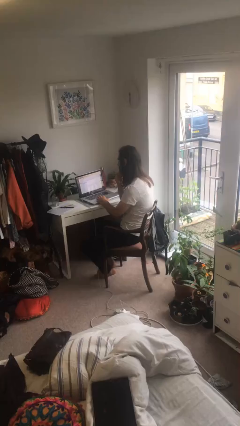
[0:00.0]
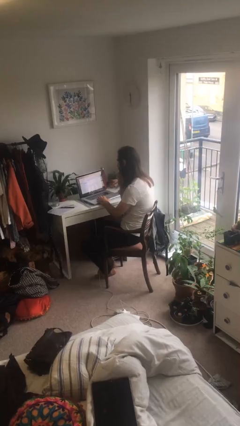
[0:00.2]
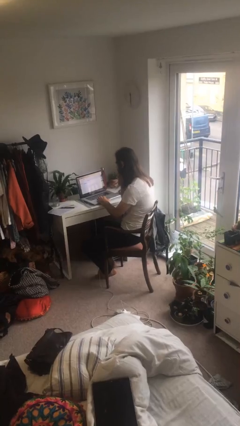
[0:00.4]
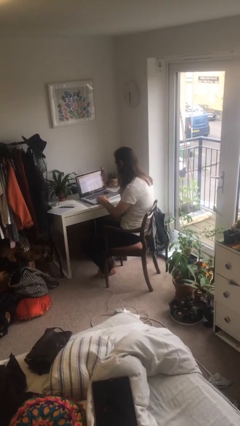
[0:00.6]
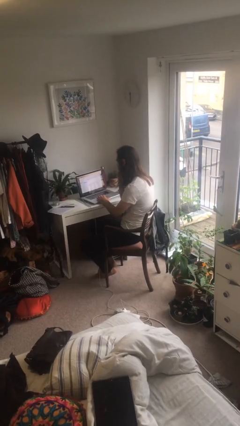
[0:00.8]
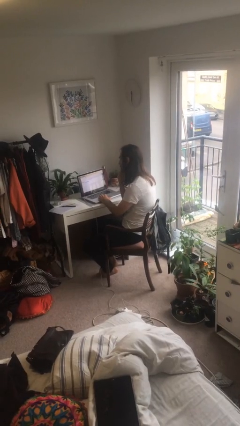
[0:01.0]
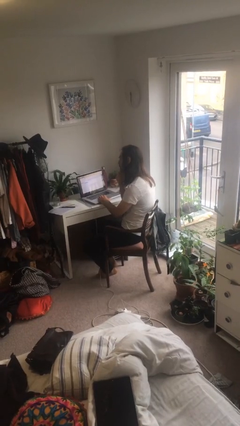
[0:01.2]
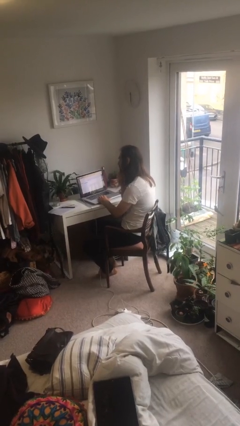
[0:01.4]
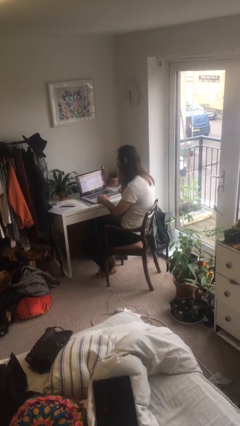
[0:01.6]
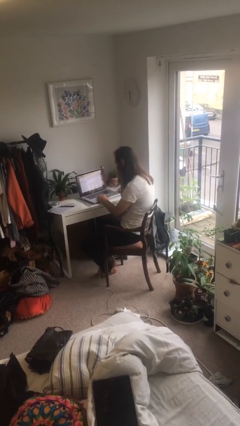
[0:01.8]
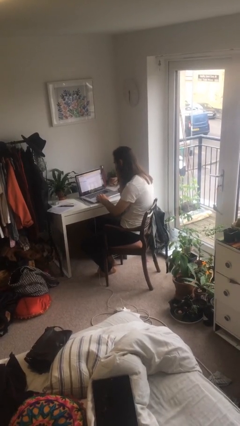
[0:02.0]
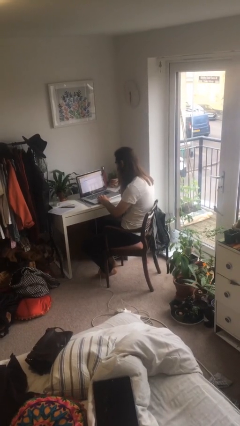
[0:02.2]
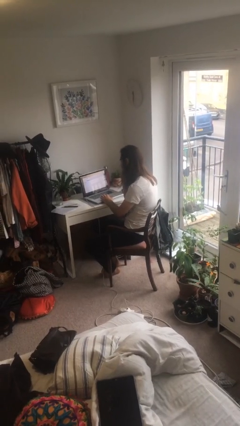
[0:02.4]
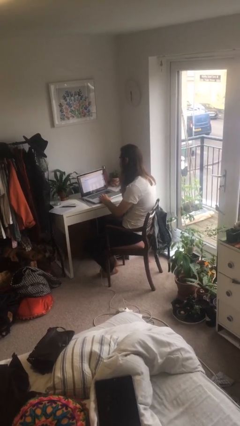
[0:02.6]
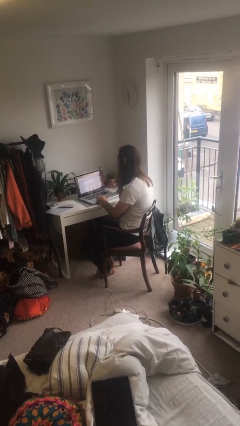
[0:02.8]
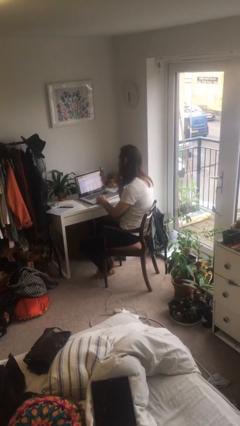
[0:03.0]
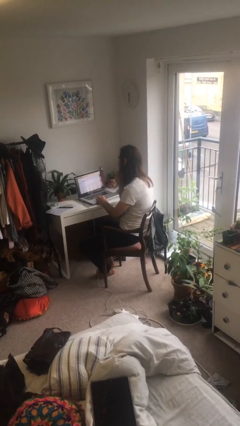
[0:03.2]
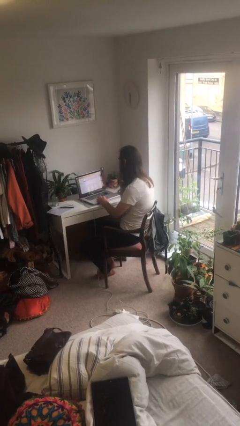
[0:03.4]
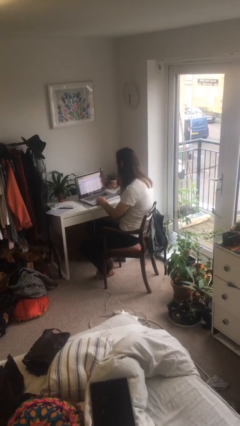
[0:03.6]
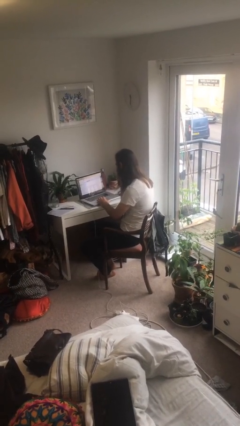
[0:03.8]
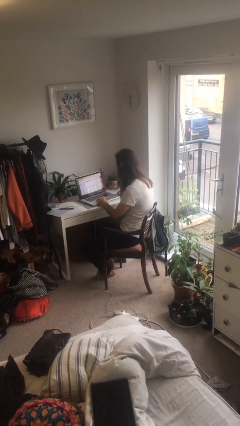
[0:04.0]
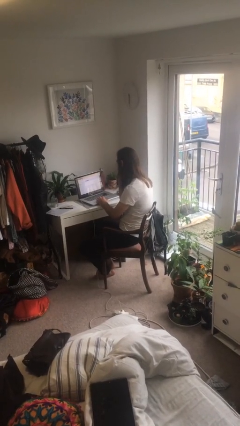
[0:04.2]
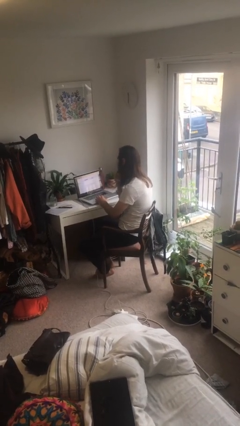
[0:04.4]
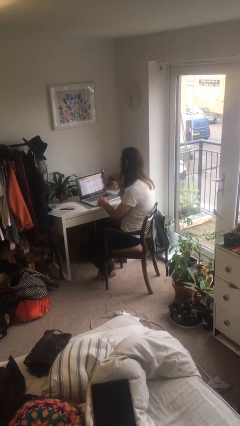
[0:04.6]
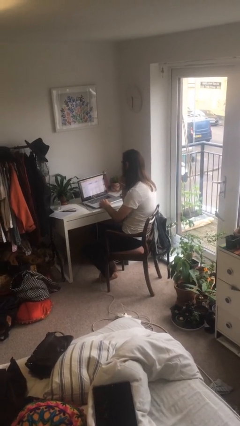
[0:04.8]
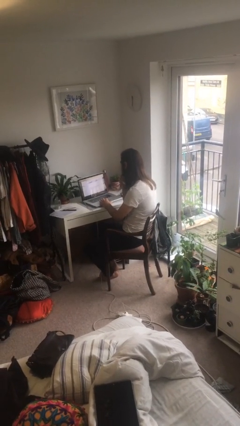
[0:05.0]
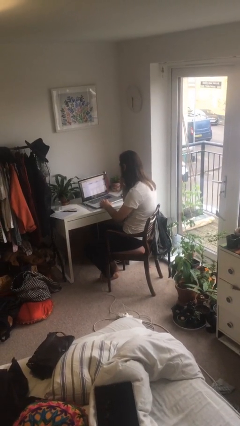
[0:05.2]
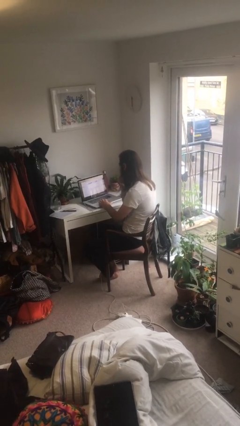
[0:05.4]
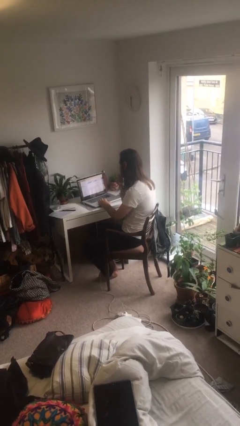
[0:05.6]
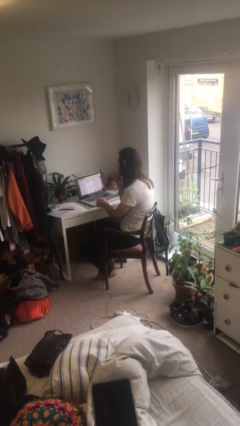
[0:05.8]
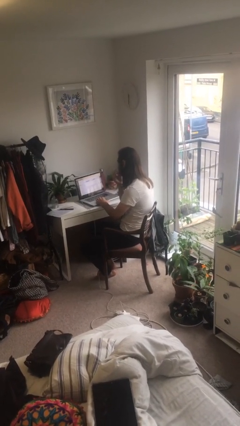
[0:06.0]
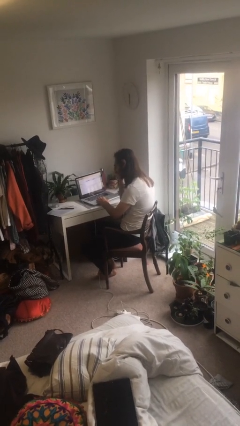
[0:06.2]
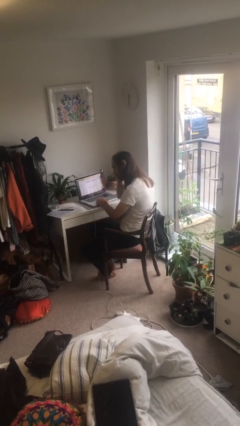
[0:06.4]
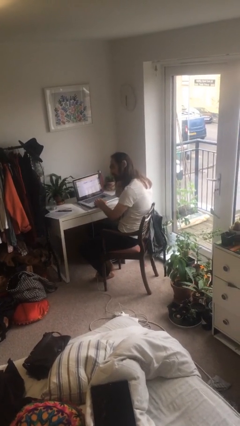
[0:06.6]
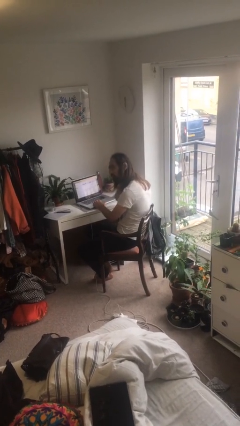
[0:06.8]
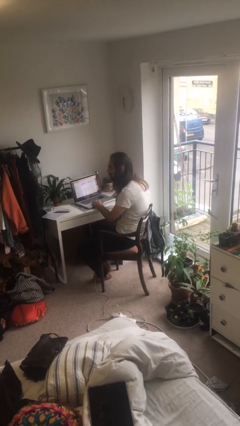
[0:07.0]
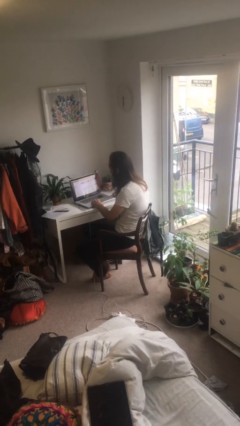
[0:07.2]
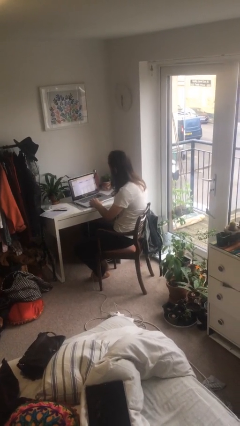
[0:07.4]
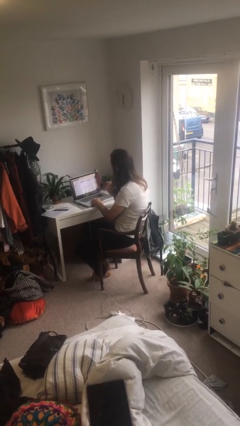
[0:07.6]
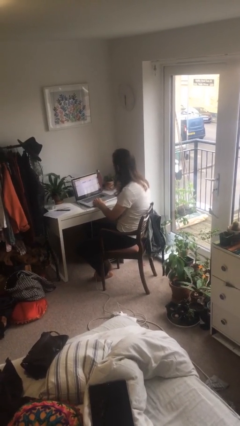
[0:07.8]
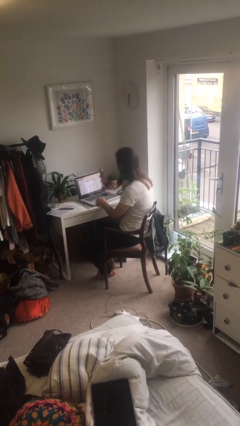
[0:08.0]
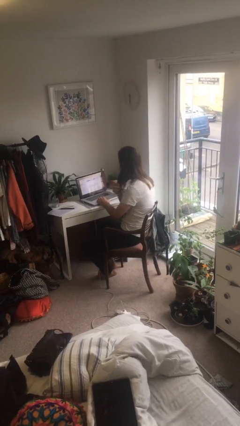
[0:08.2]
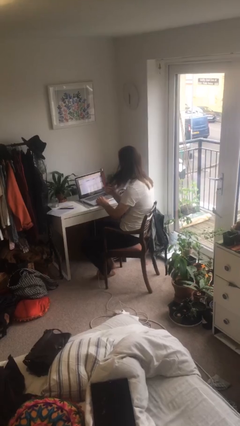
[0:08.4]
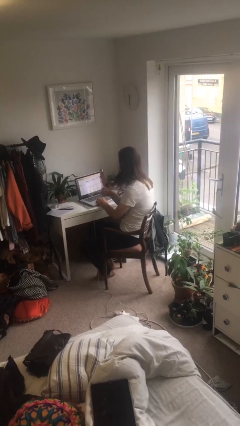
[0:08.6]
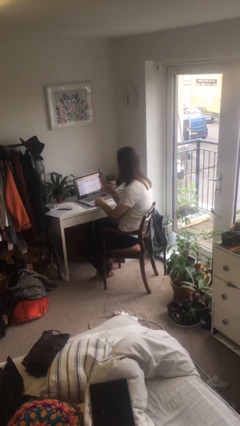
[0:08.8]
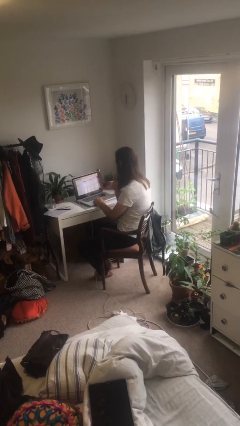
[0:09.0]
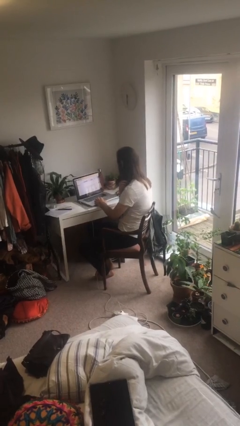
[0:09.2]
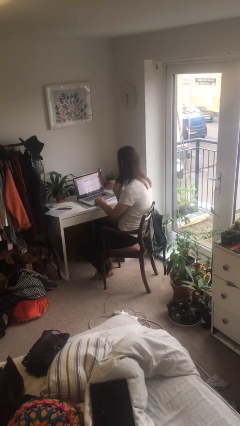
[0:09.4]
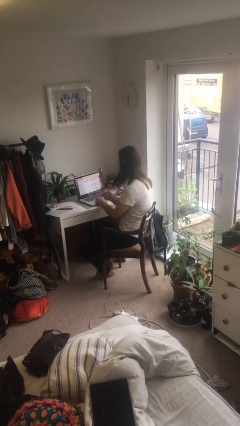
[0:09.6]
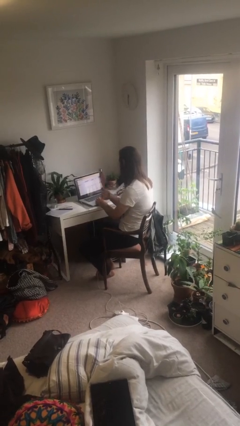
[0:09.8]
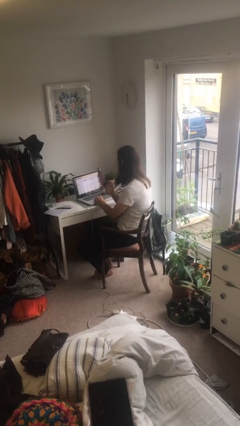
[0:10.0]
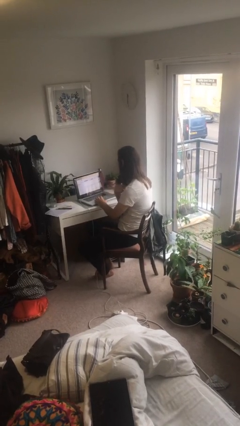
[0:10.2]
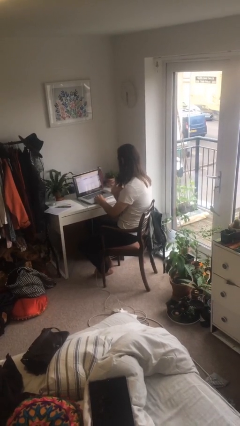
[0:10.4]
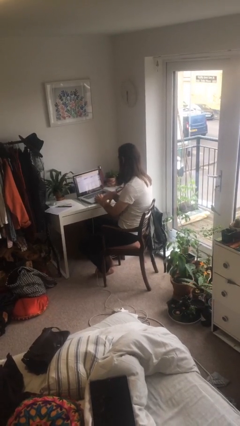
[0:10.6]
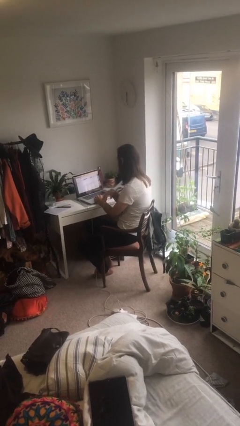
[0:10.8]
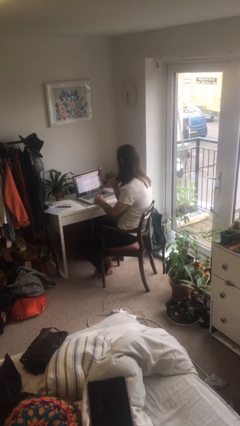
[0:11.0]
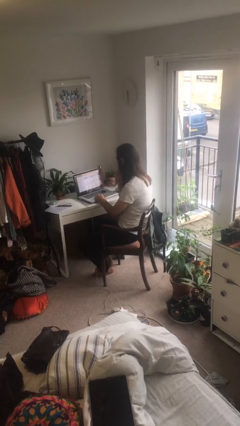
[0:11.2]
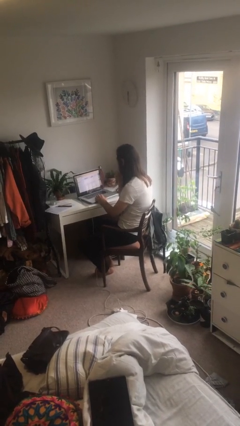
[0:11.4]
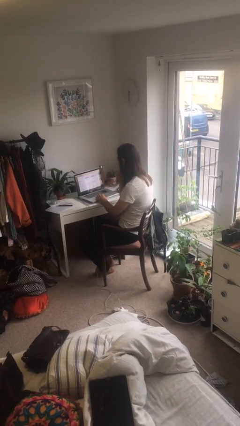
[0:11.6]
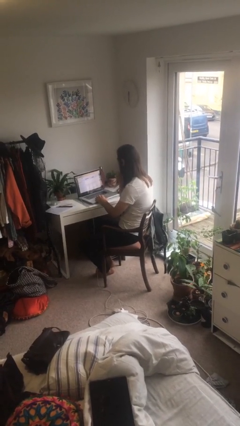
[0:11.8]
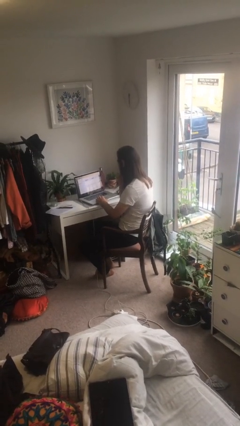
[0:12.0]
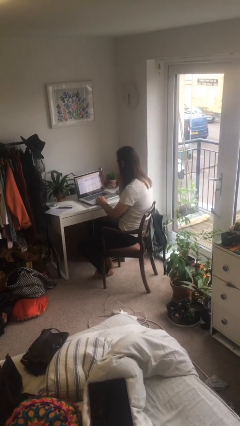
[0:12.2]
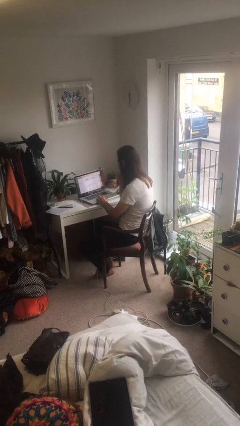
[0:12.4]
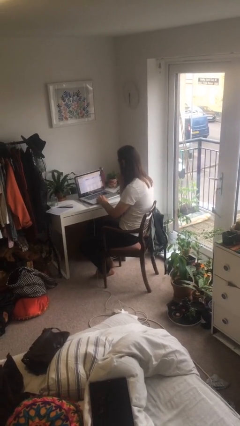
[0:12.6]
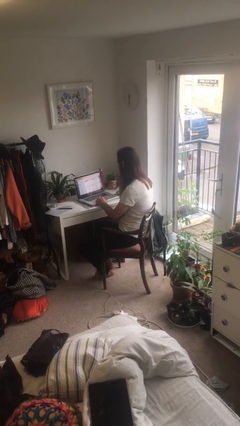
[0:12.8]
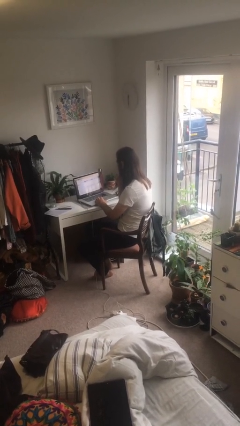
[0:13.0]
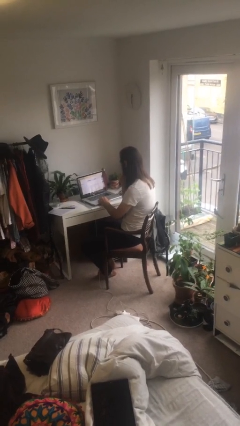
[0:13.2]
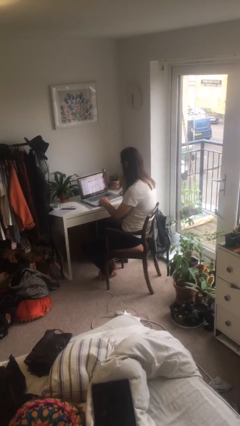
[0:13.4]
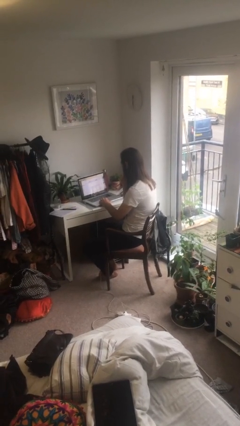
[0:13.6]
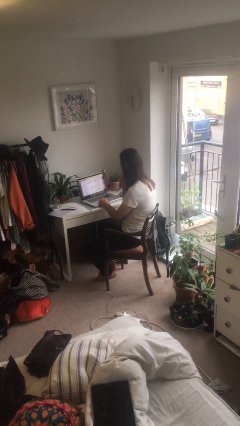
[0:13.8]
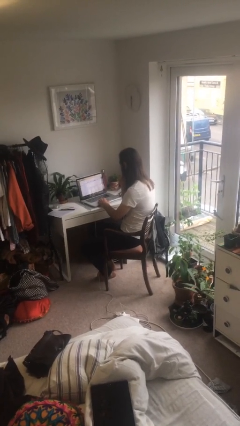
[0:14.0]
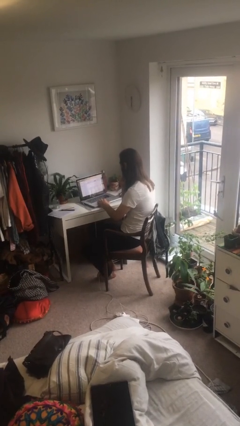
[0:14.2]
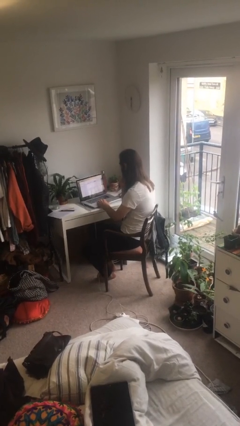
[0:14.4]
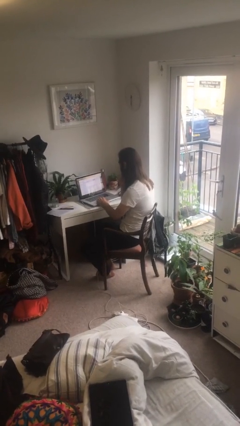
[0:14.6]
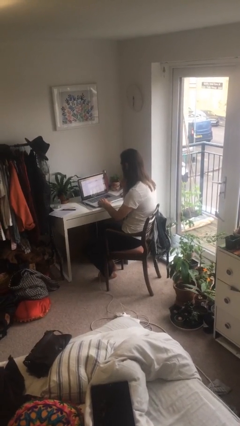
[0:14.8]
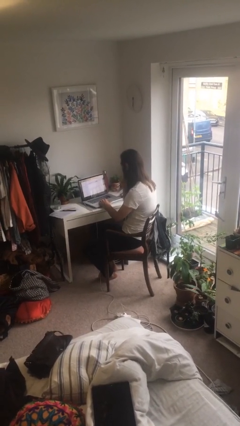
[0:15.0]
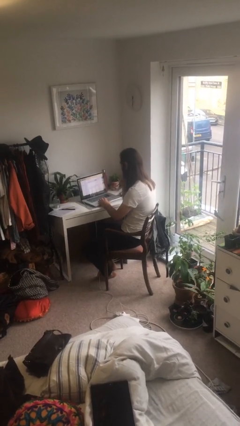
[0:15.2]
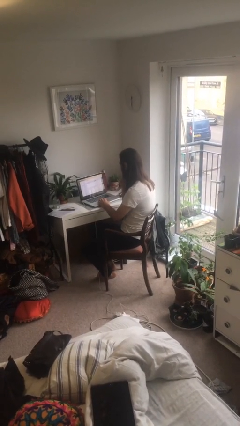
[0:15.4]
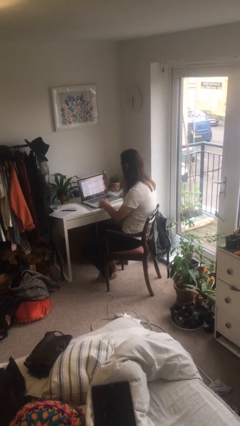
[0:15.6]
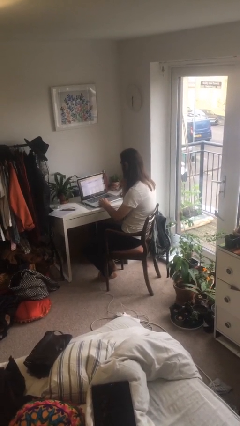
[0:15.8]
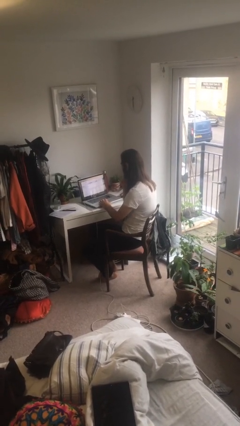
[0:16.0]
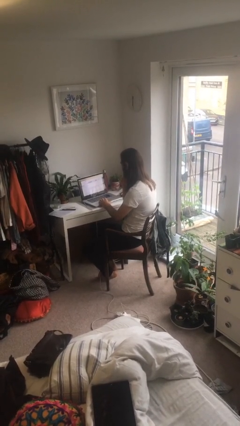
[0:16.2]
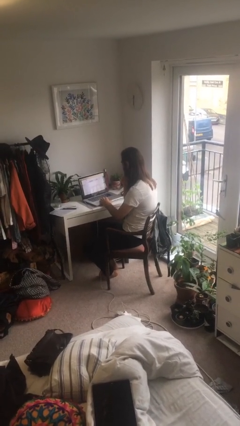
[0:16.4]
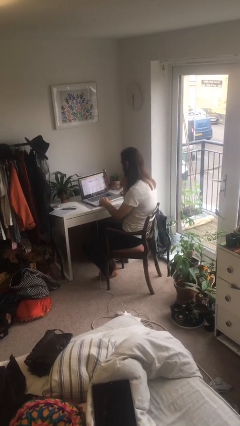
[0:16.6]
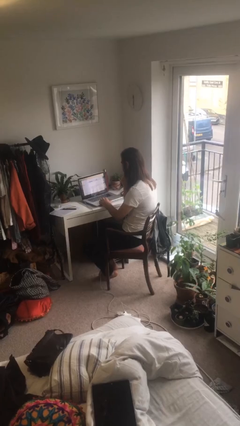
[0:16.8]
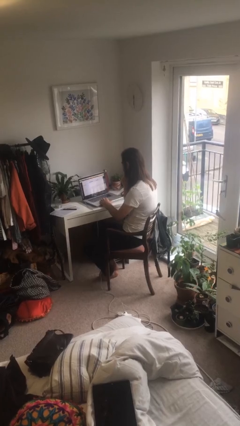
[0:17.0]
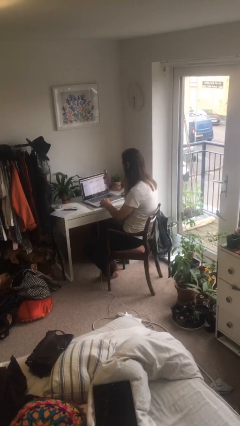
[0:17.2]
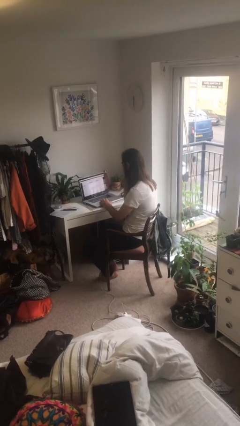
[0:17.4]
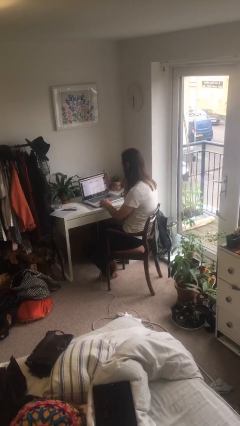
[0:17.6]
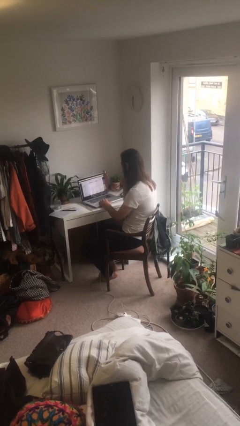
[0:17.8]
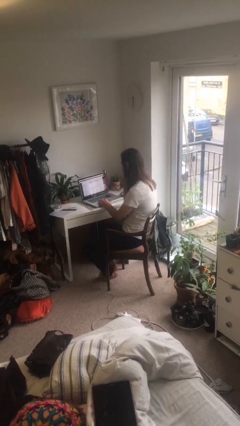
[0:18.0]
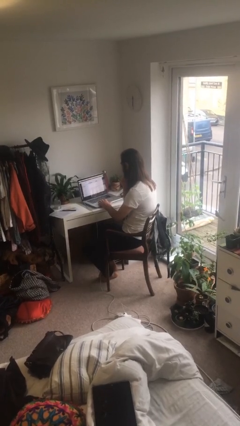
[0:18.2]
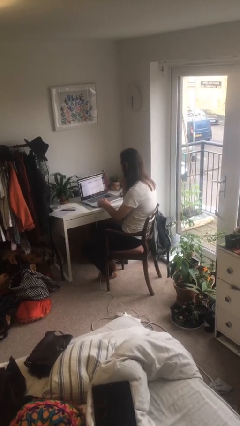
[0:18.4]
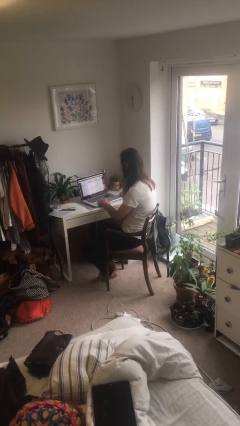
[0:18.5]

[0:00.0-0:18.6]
person interacts with laptop
